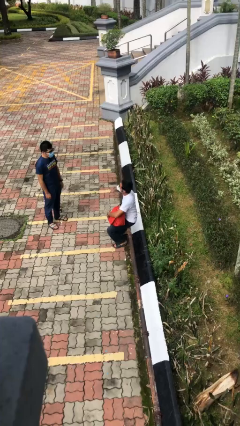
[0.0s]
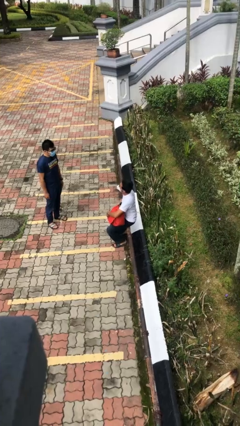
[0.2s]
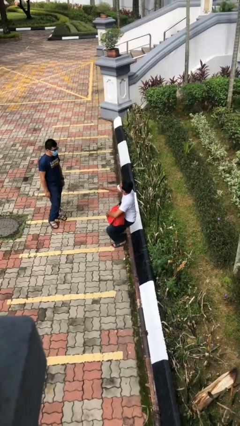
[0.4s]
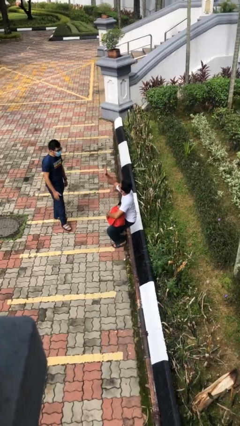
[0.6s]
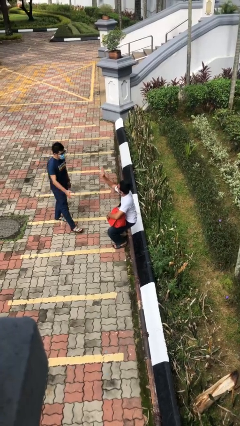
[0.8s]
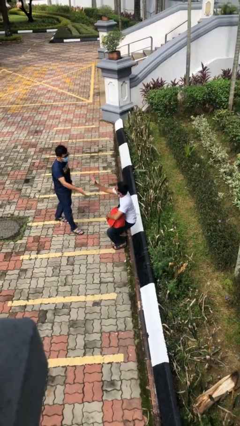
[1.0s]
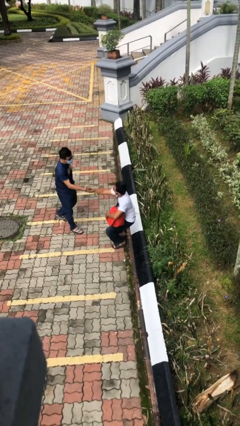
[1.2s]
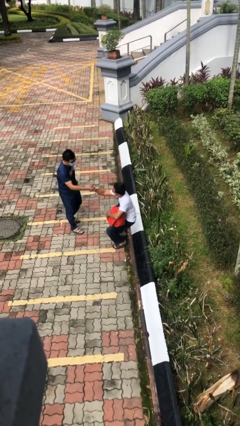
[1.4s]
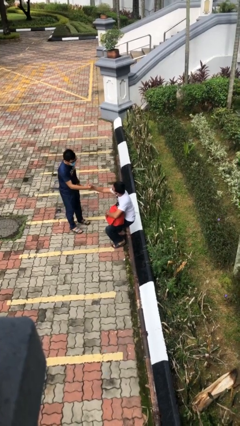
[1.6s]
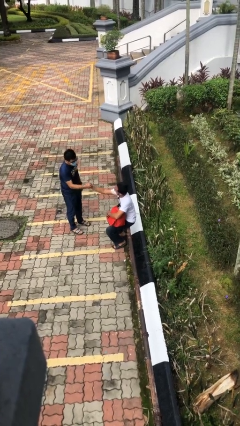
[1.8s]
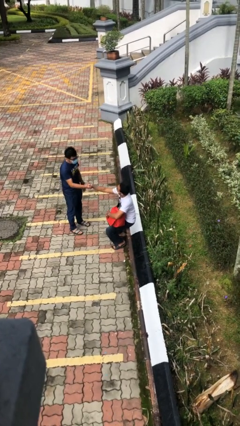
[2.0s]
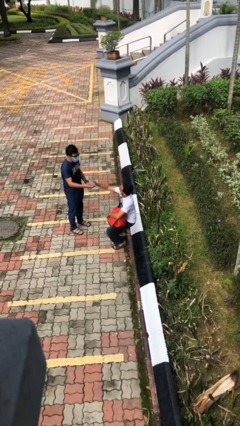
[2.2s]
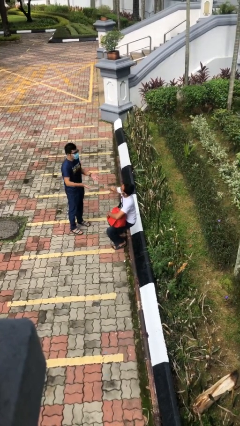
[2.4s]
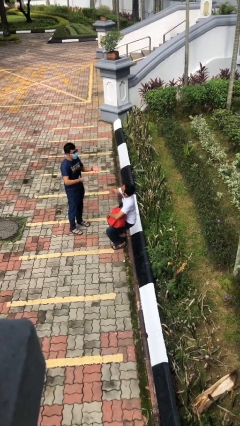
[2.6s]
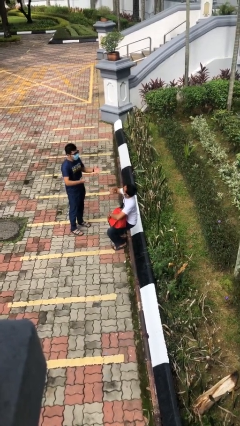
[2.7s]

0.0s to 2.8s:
person shakes hand

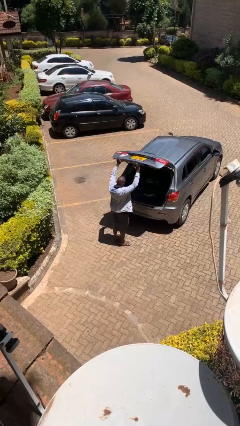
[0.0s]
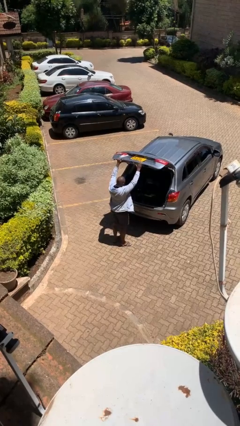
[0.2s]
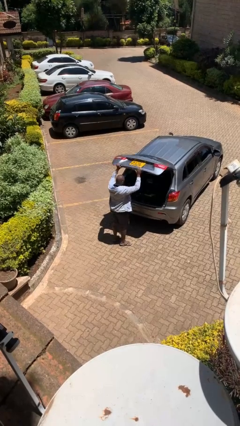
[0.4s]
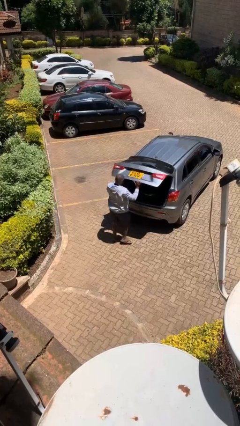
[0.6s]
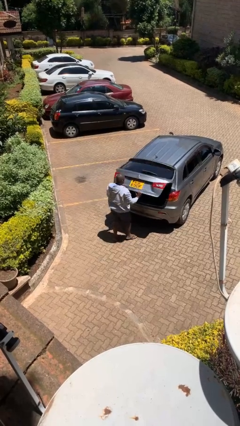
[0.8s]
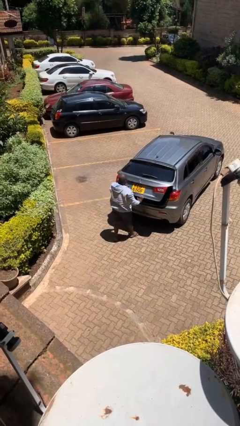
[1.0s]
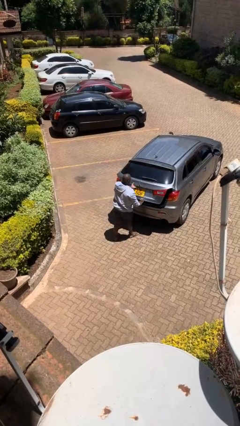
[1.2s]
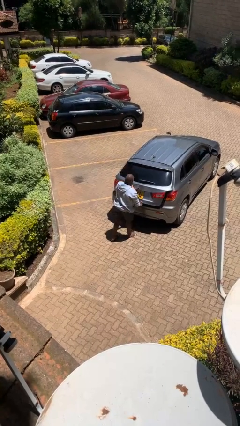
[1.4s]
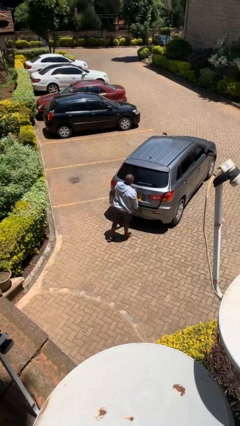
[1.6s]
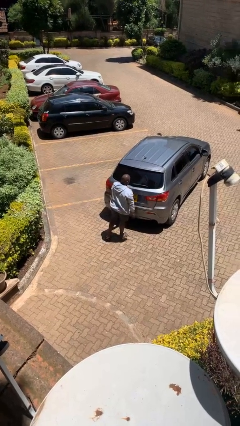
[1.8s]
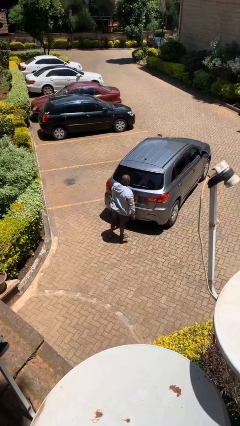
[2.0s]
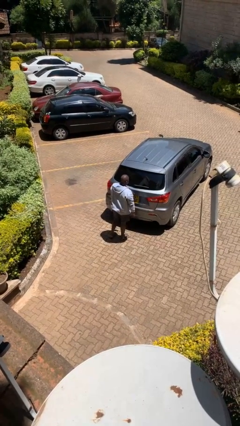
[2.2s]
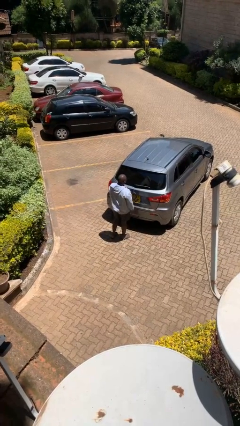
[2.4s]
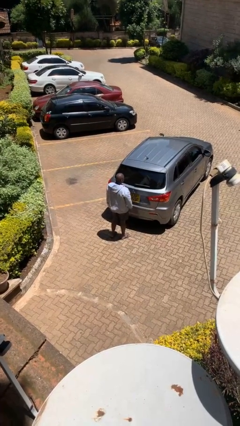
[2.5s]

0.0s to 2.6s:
person closes car trunk

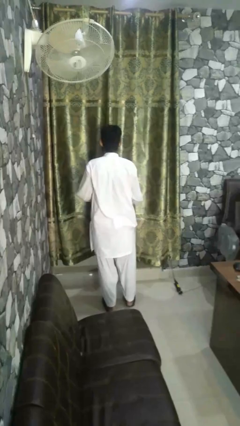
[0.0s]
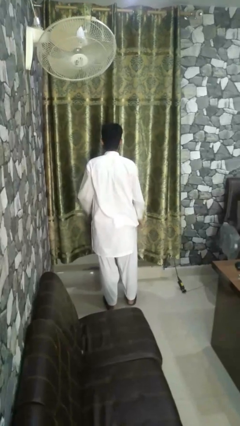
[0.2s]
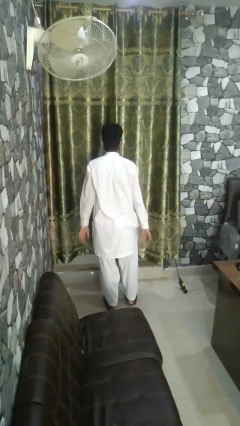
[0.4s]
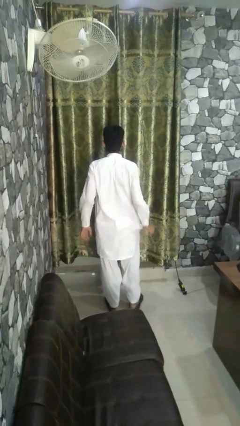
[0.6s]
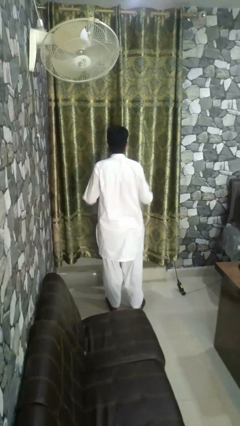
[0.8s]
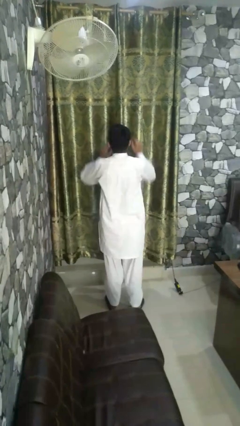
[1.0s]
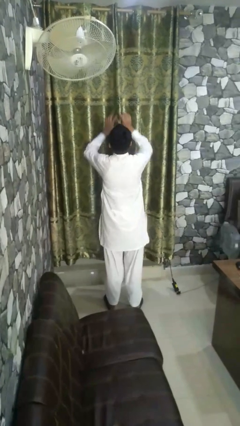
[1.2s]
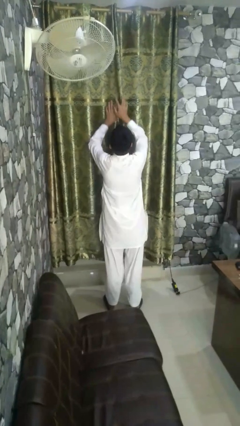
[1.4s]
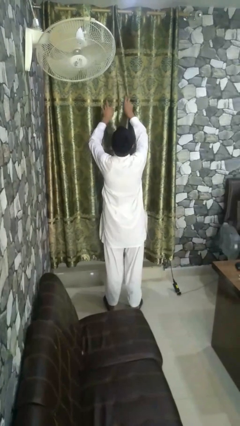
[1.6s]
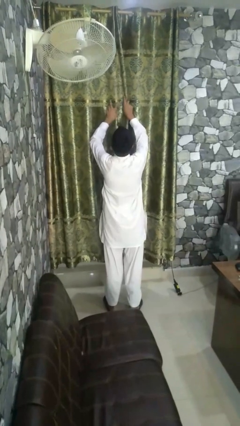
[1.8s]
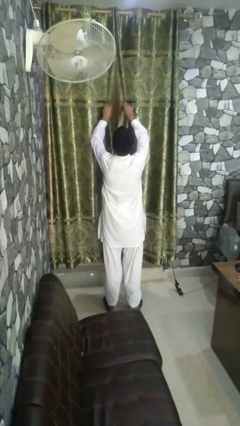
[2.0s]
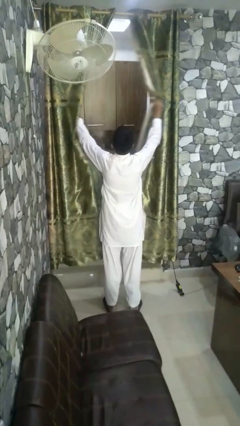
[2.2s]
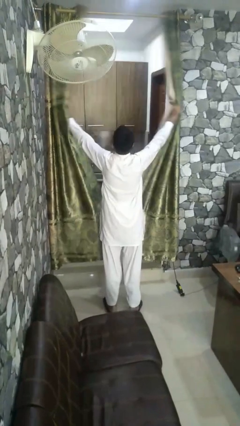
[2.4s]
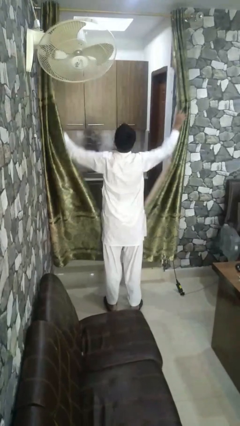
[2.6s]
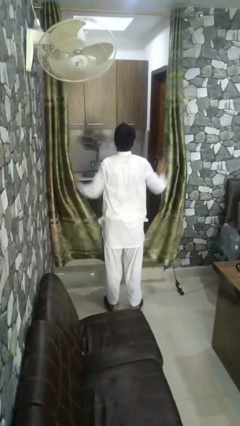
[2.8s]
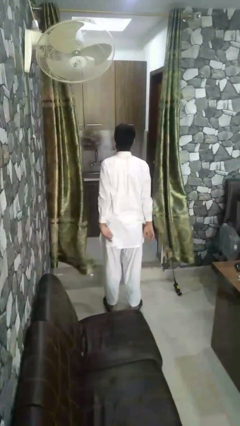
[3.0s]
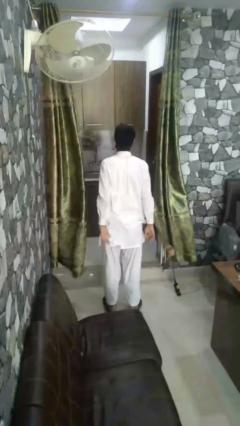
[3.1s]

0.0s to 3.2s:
person opens curtains

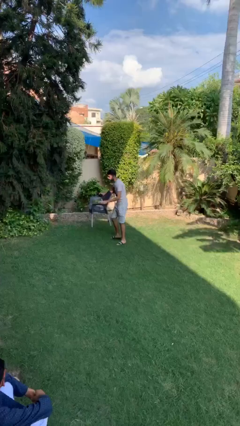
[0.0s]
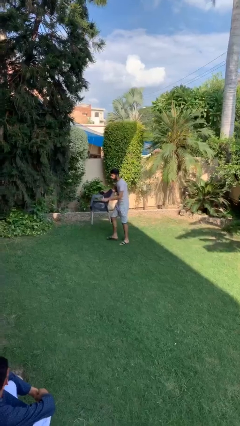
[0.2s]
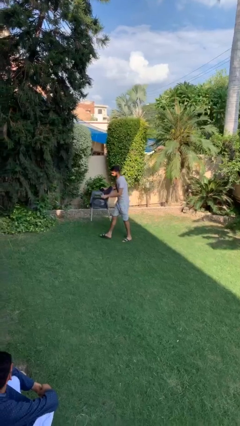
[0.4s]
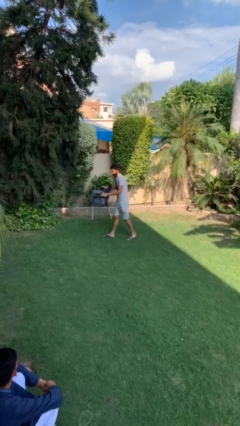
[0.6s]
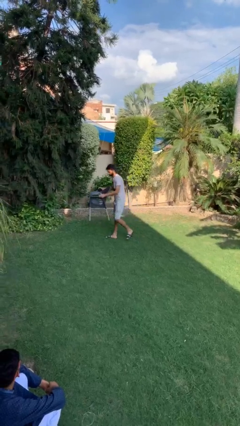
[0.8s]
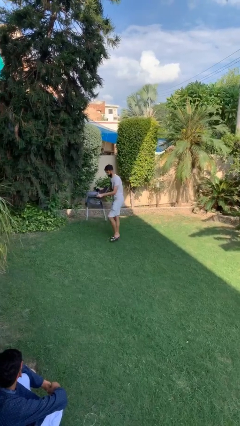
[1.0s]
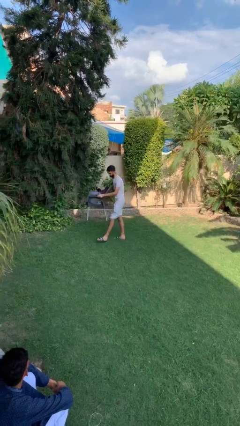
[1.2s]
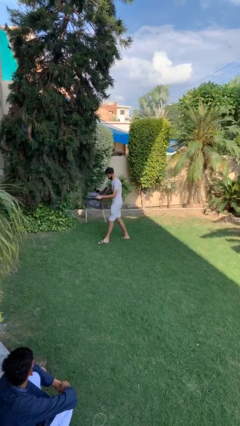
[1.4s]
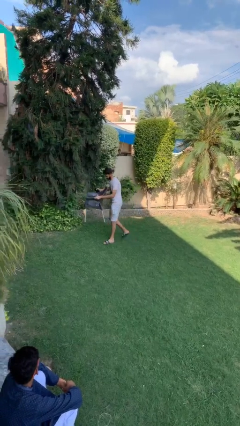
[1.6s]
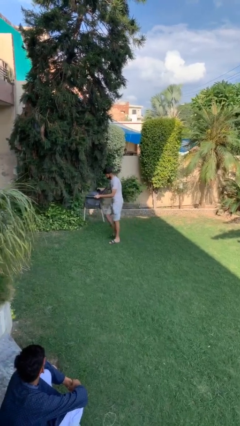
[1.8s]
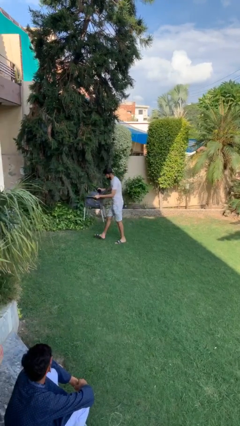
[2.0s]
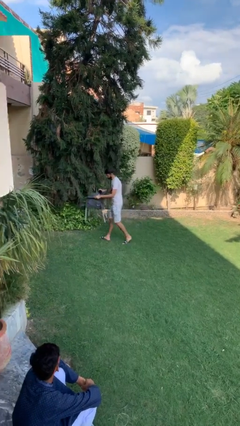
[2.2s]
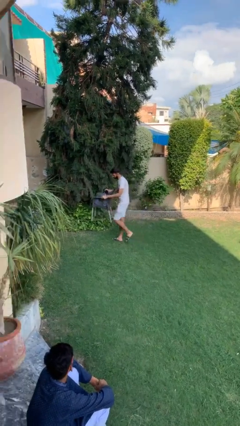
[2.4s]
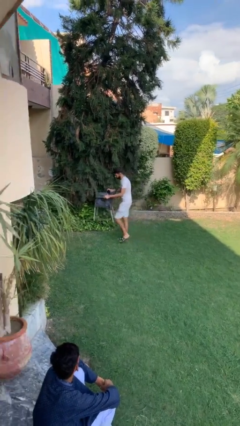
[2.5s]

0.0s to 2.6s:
person carries heavy object

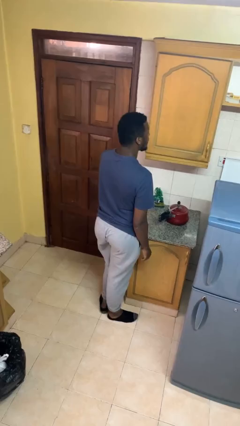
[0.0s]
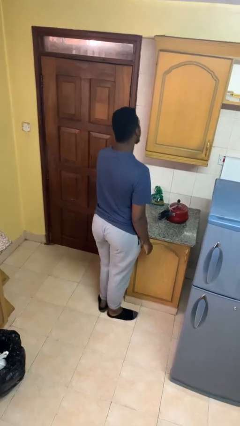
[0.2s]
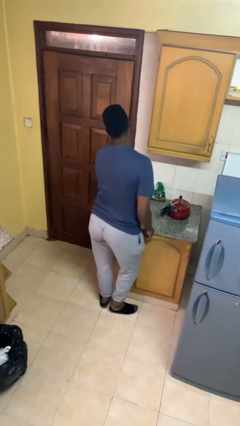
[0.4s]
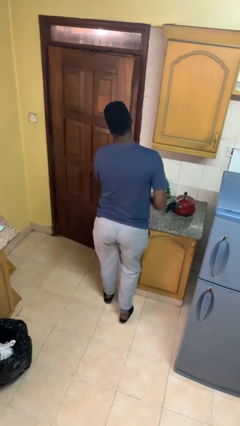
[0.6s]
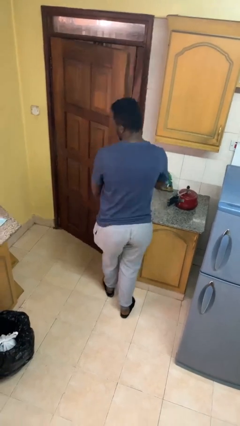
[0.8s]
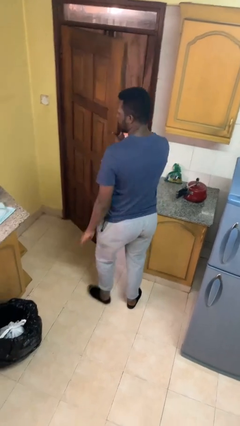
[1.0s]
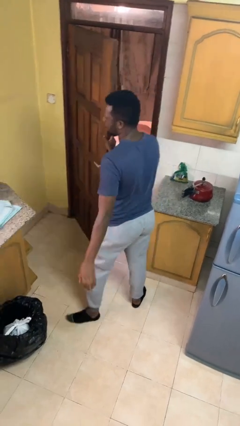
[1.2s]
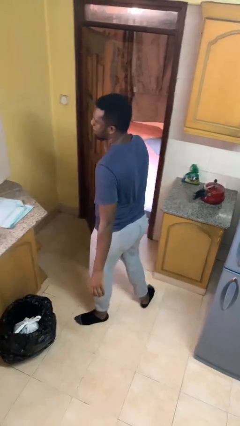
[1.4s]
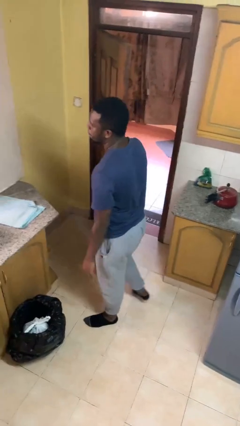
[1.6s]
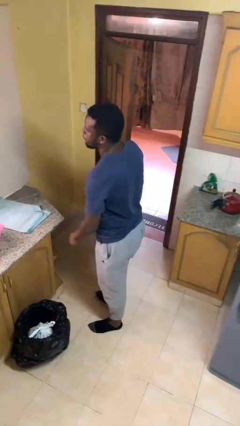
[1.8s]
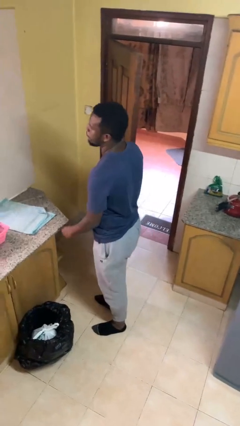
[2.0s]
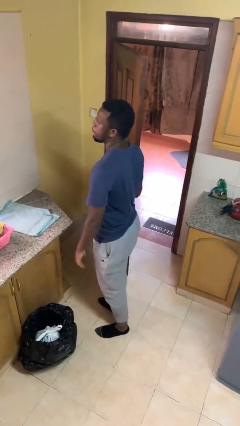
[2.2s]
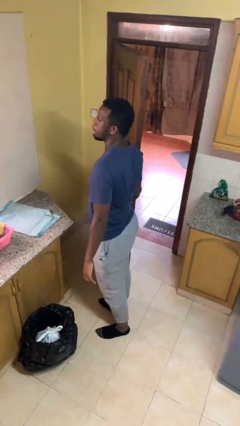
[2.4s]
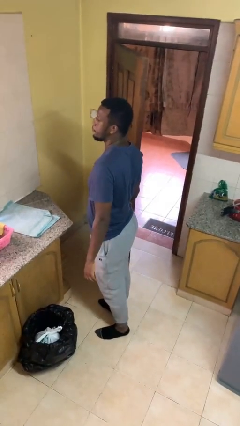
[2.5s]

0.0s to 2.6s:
person opens facility door

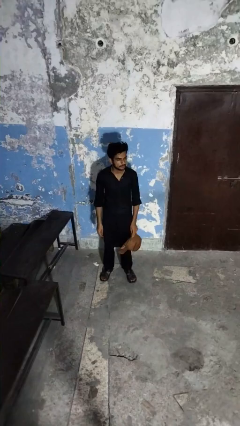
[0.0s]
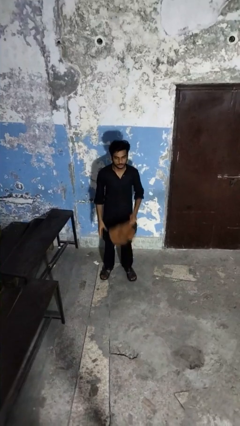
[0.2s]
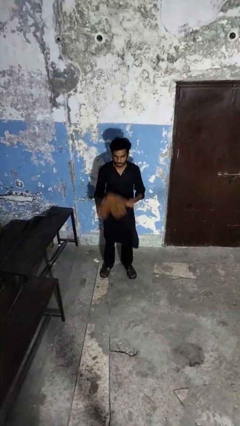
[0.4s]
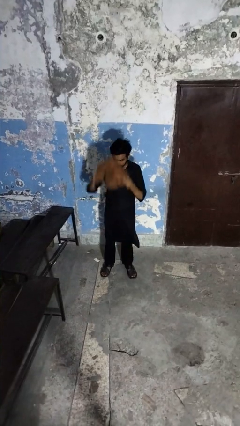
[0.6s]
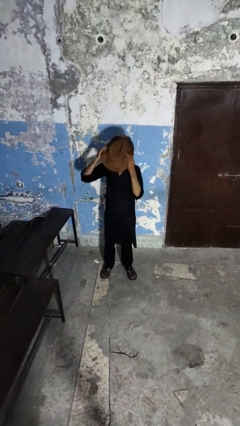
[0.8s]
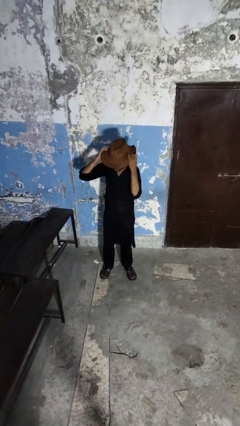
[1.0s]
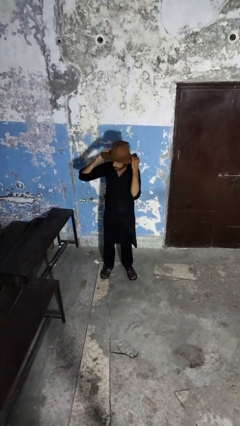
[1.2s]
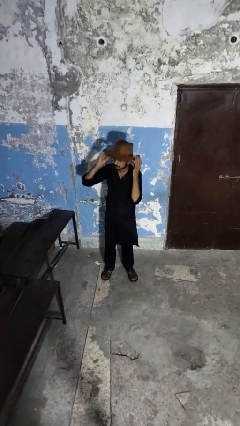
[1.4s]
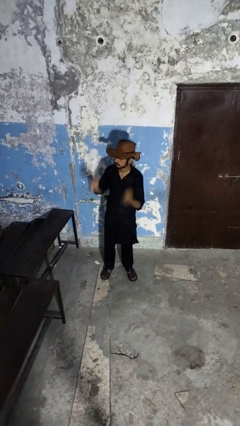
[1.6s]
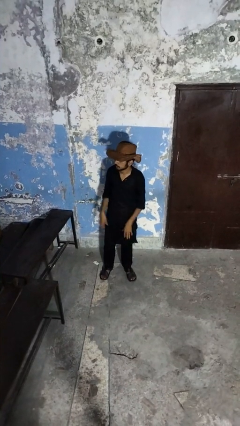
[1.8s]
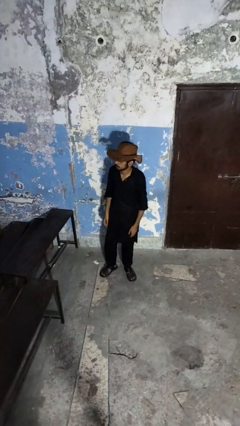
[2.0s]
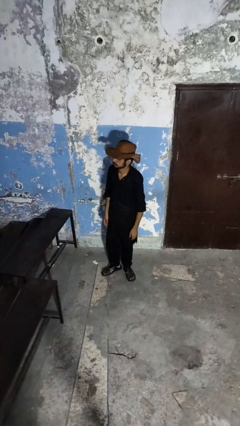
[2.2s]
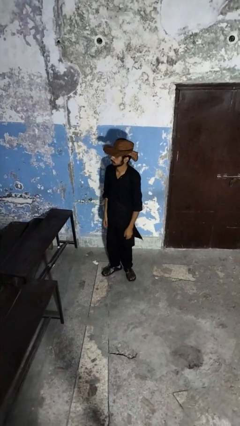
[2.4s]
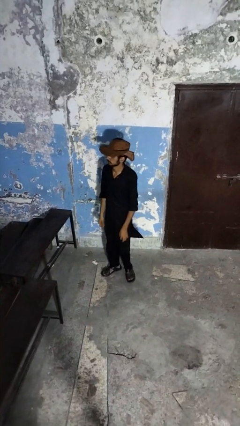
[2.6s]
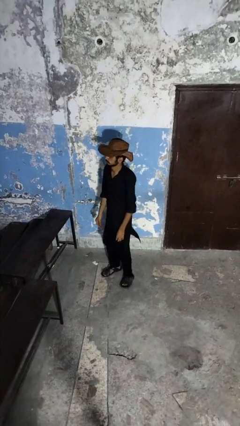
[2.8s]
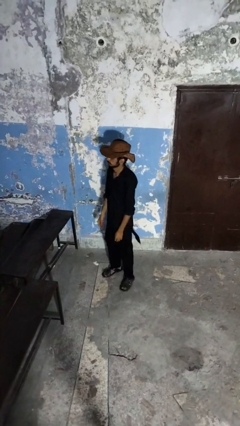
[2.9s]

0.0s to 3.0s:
person puts on hat

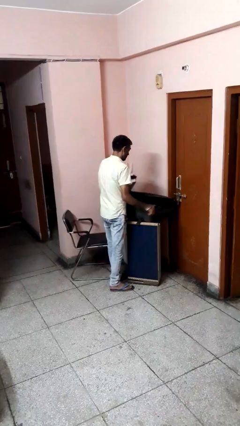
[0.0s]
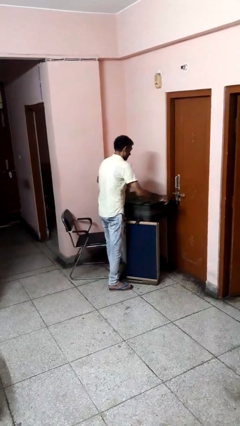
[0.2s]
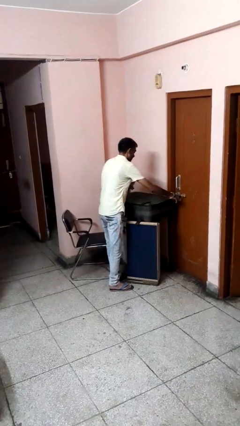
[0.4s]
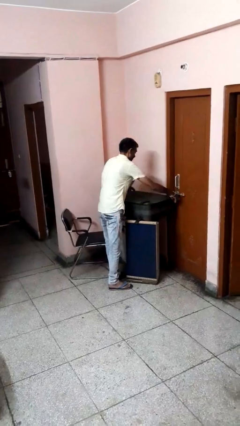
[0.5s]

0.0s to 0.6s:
person closes suitcase
